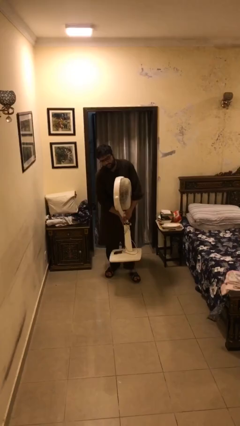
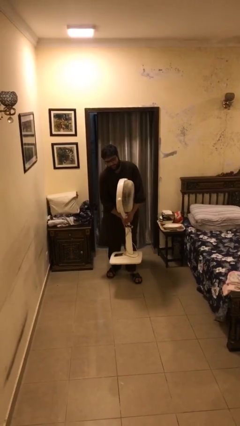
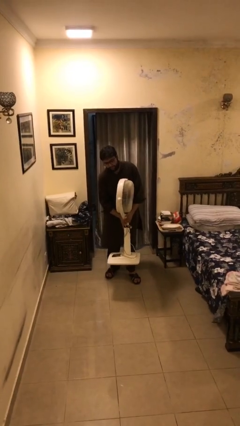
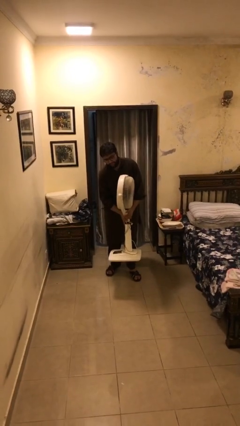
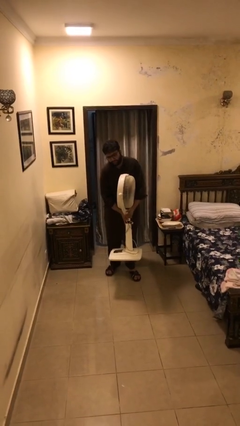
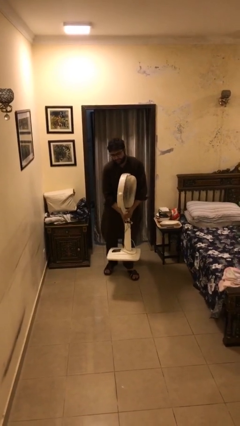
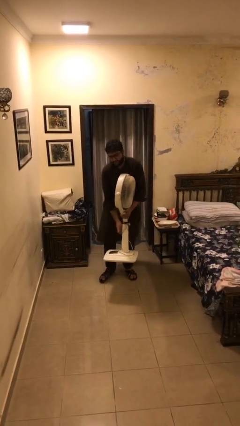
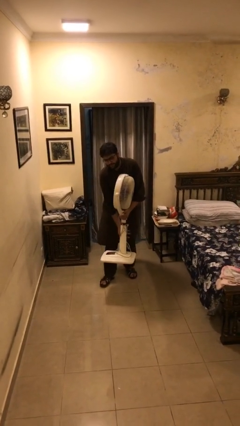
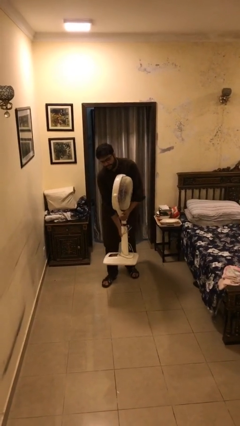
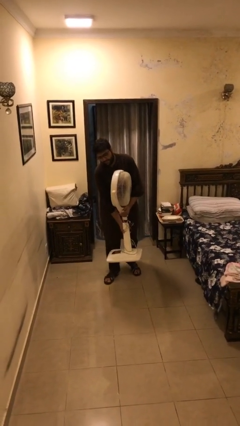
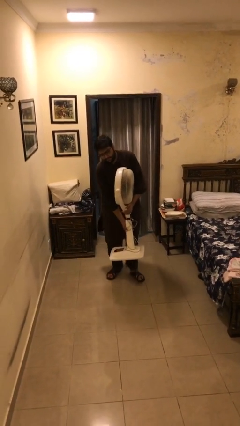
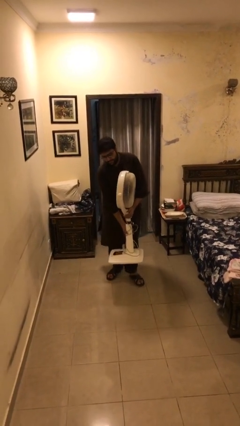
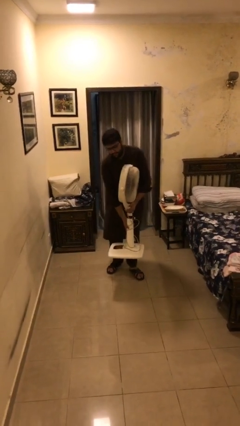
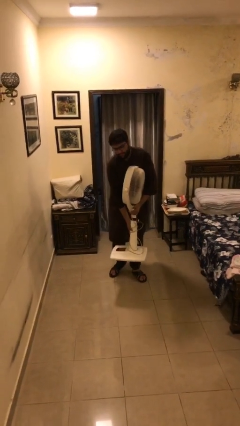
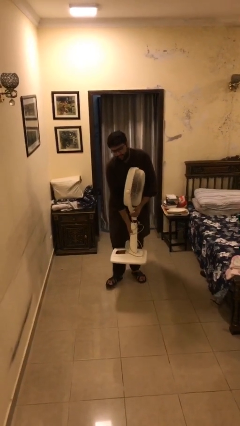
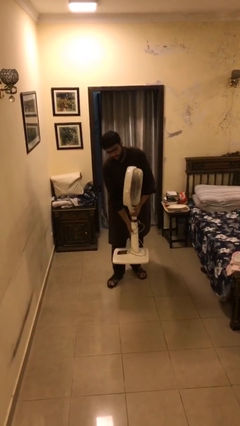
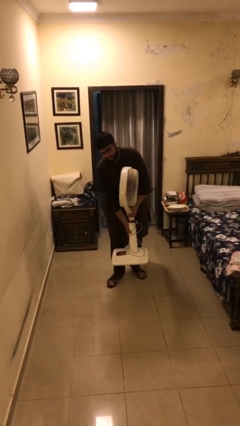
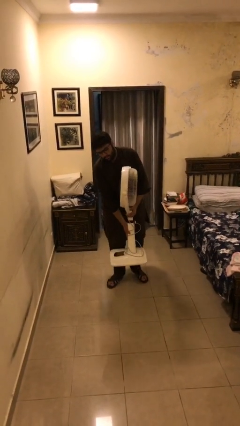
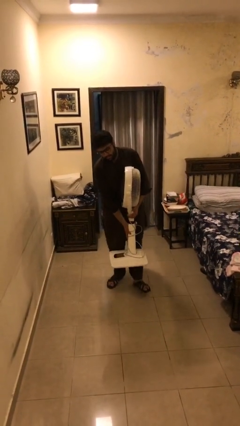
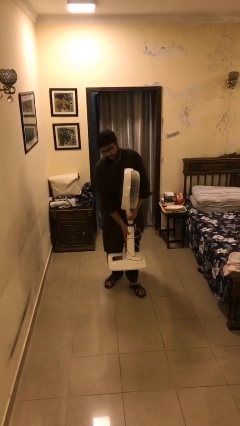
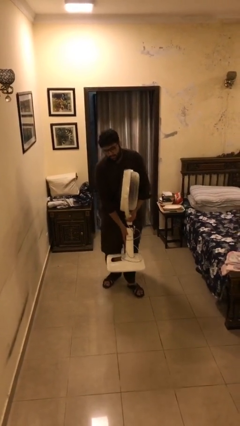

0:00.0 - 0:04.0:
person carries heavy object

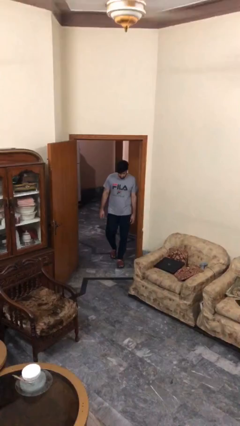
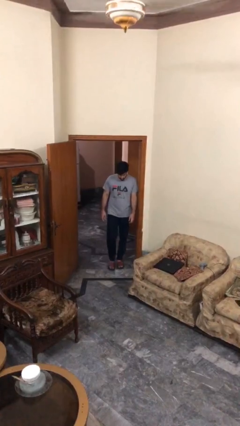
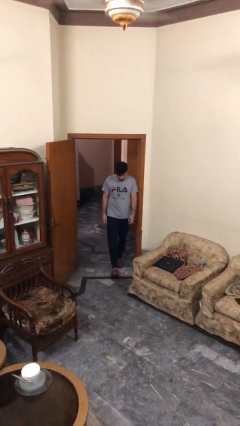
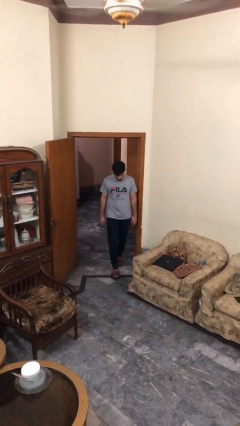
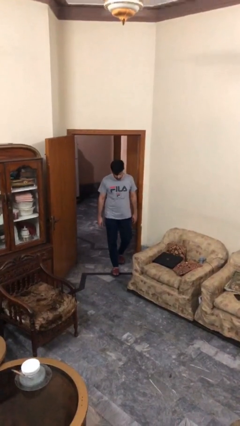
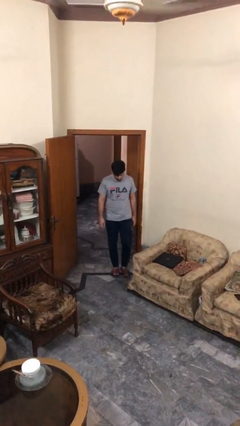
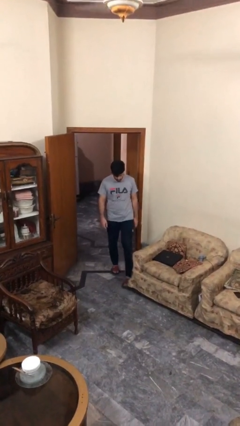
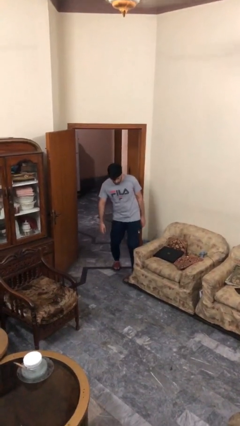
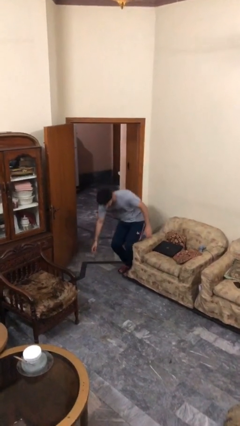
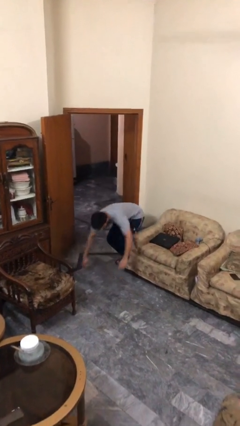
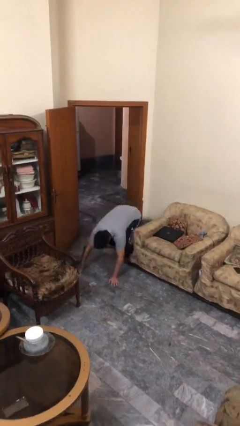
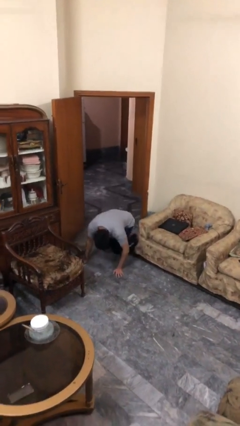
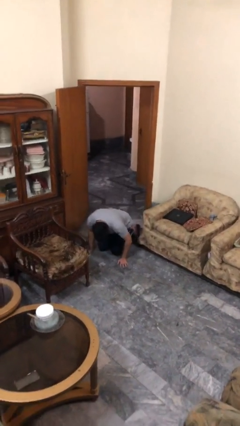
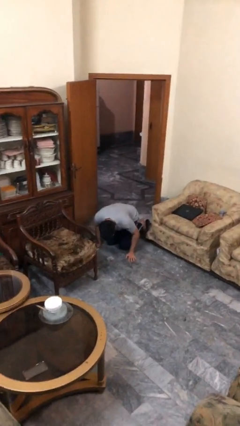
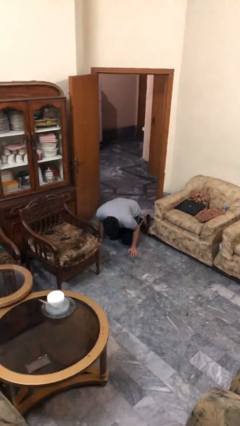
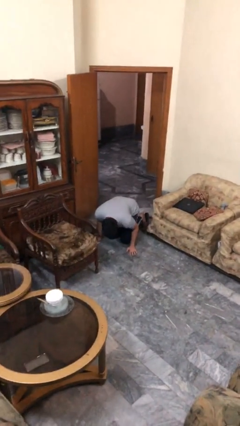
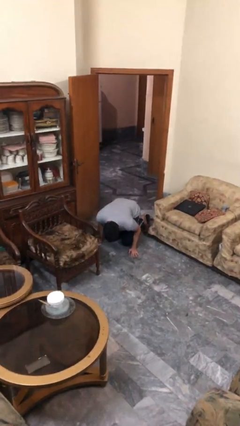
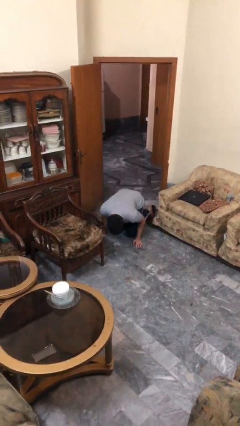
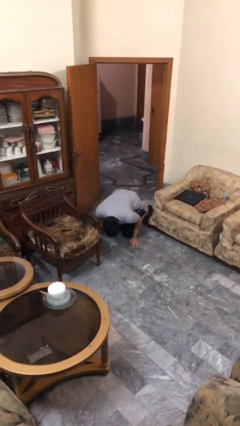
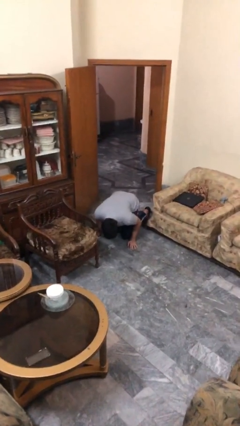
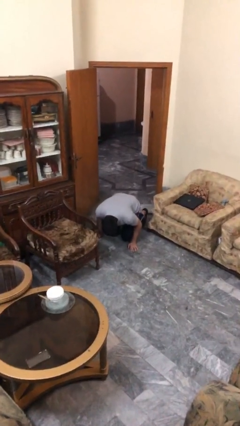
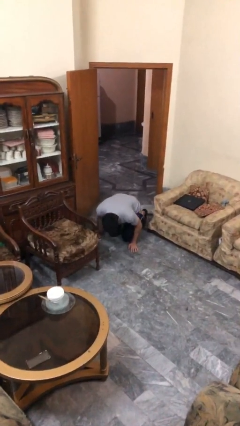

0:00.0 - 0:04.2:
person trips on object on floor

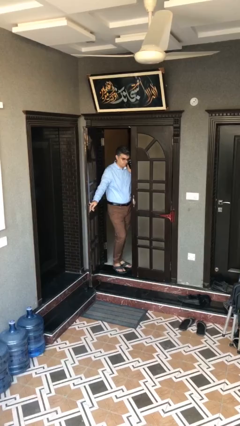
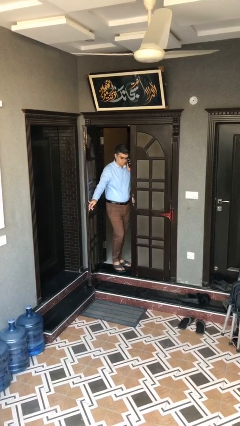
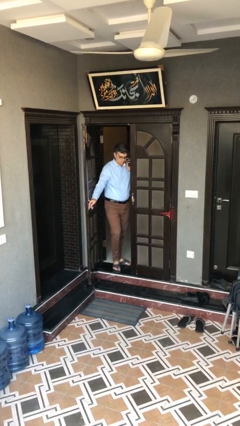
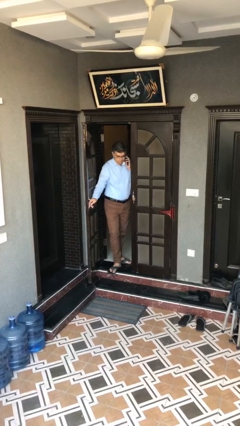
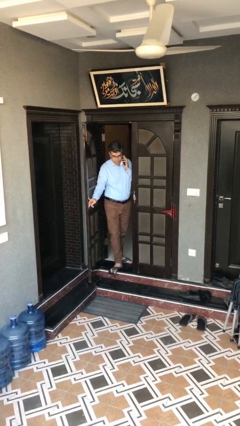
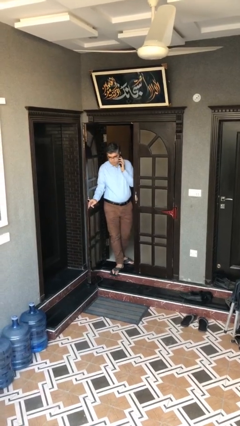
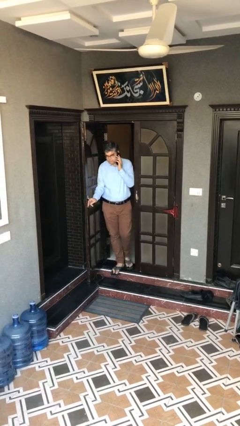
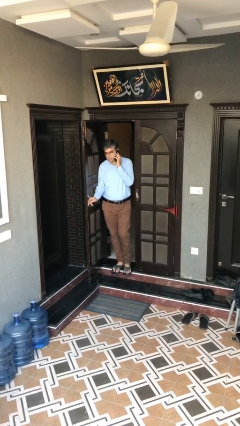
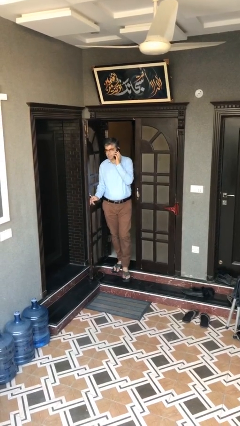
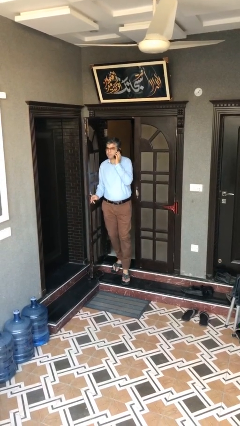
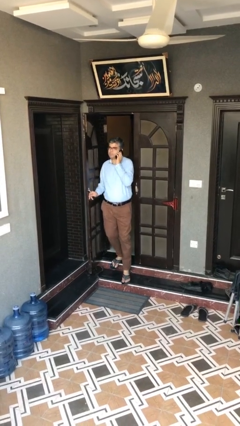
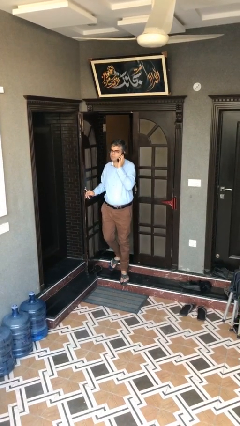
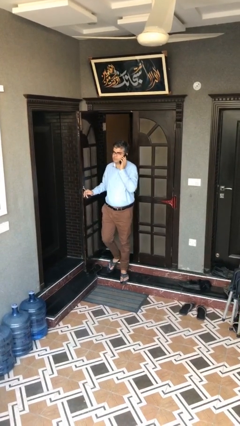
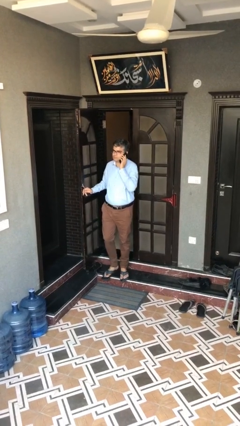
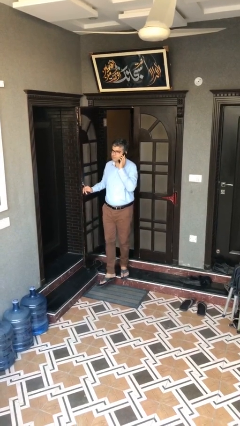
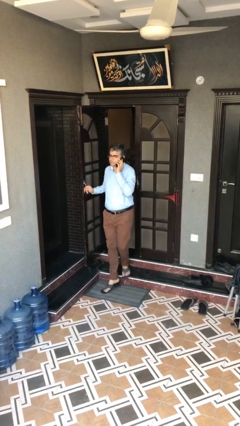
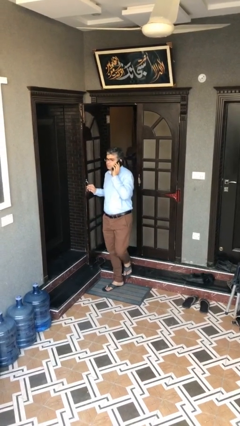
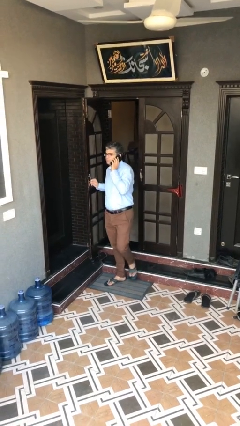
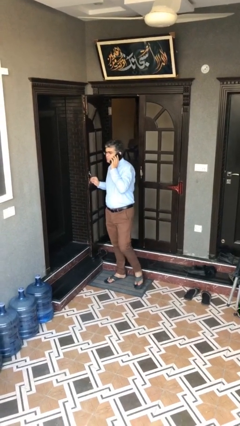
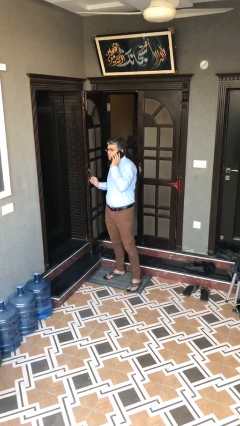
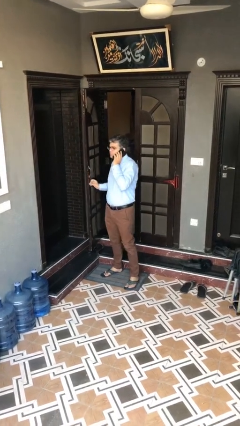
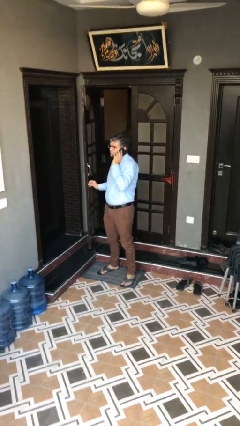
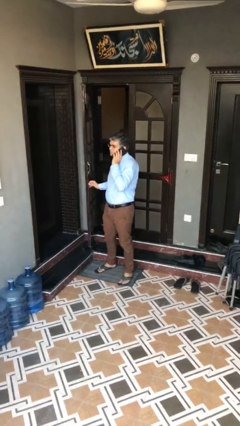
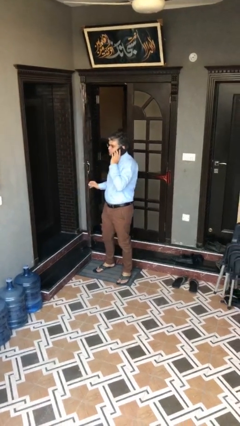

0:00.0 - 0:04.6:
person enters scene through structure

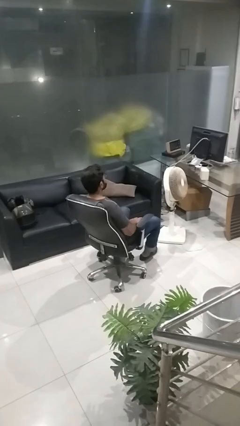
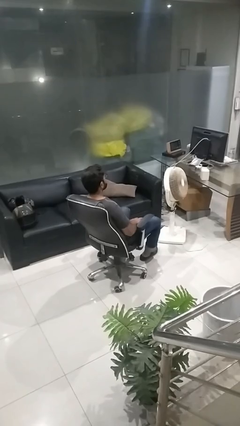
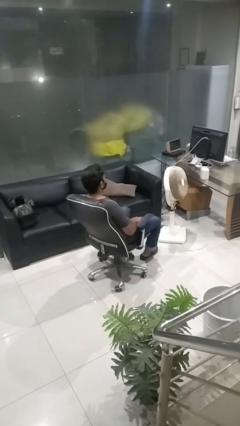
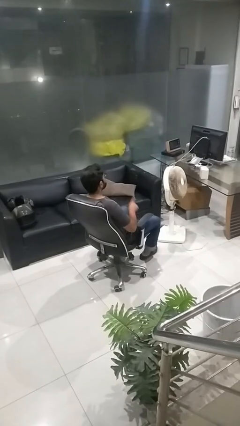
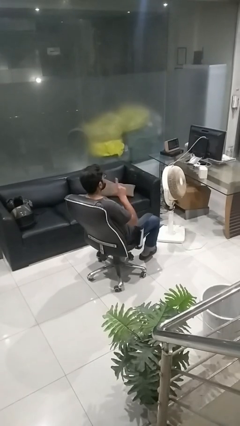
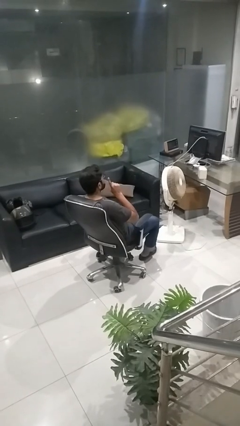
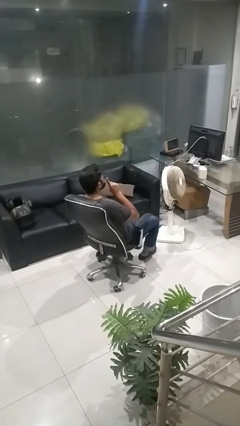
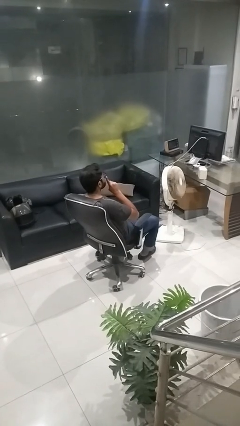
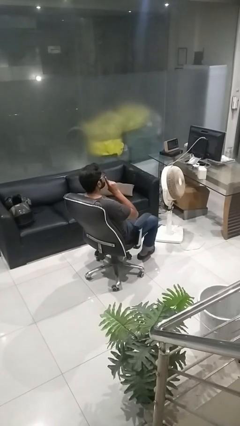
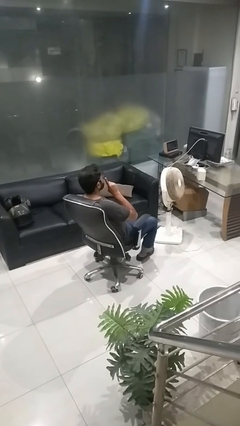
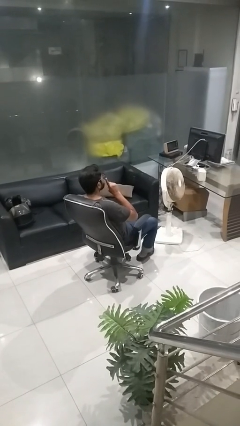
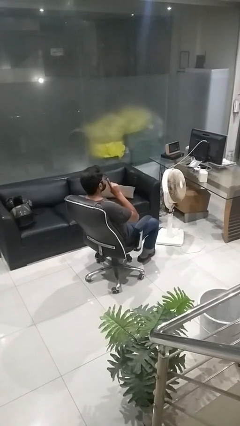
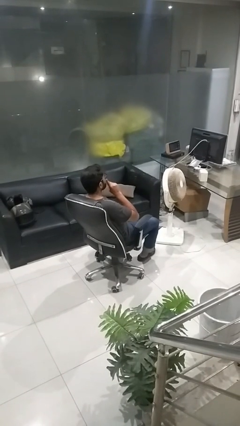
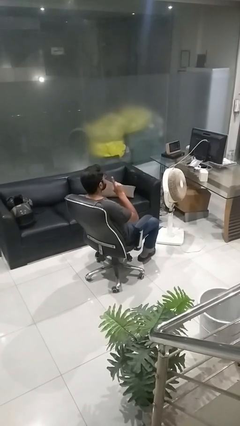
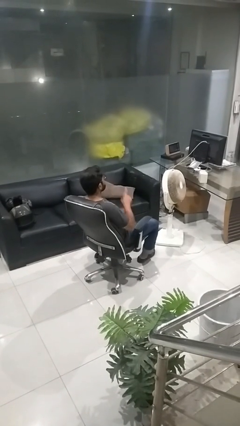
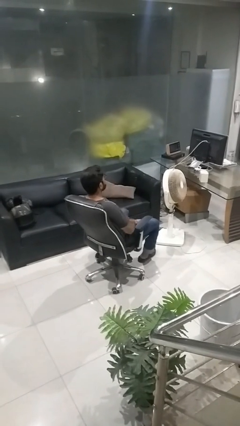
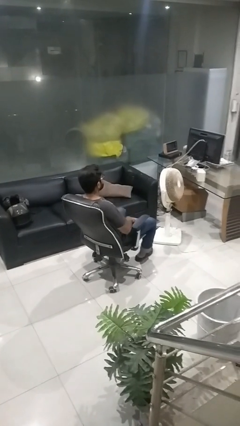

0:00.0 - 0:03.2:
person gestures be quiet

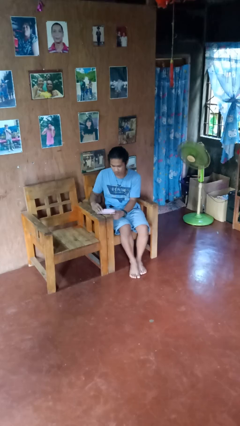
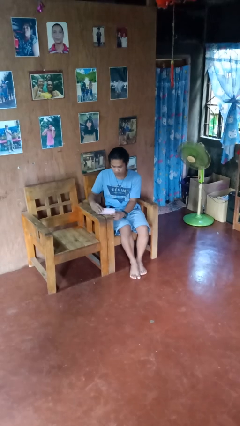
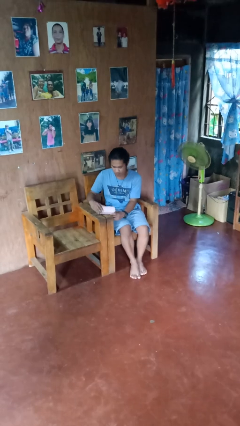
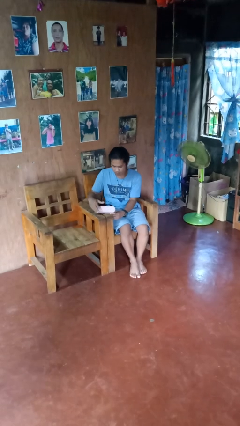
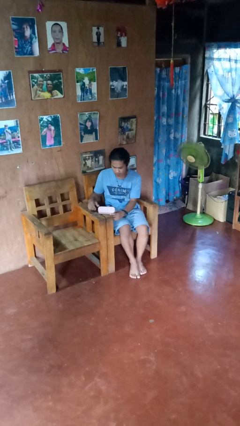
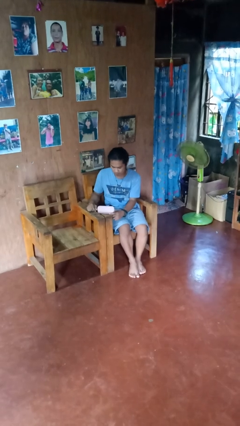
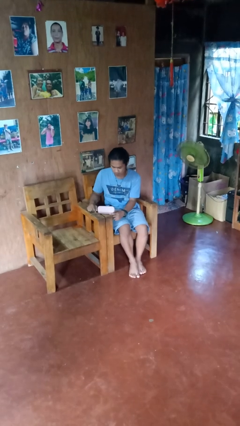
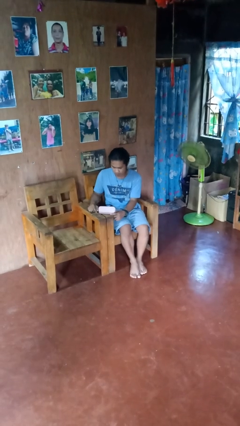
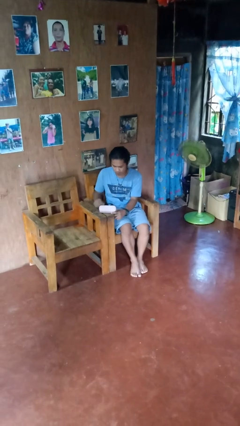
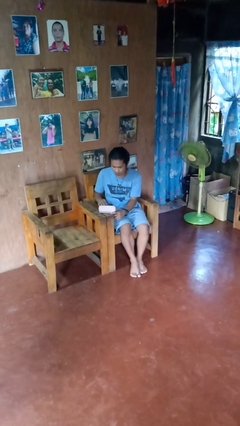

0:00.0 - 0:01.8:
person opens jewelry box
